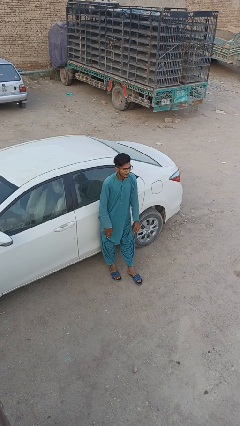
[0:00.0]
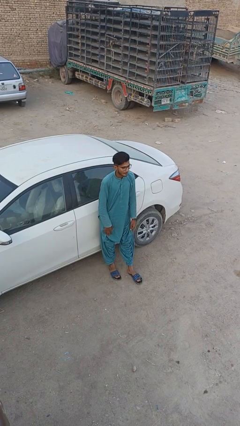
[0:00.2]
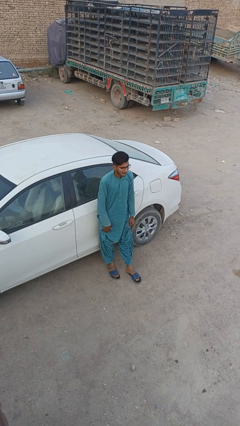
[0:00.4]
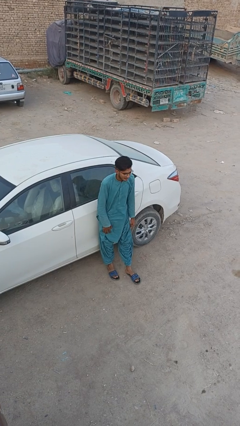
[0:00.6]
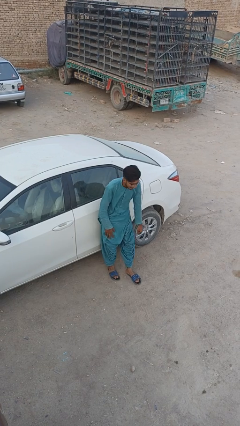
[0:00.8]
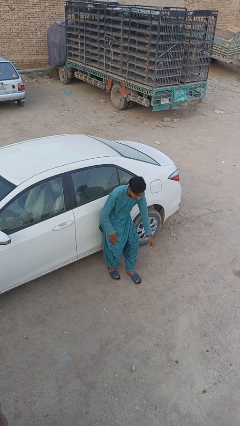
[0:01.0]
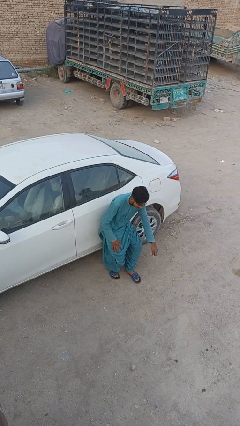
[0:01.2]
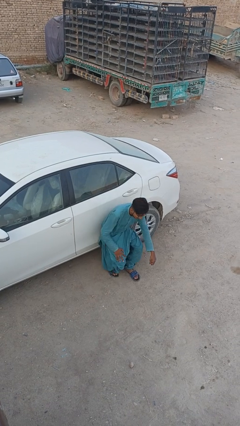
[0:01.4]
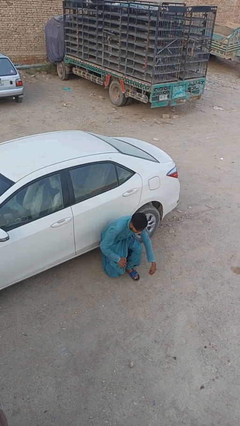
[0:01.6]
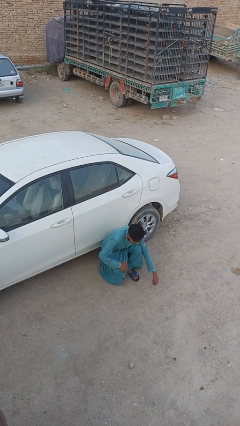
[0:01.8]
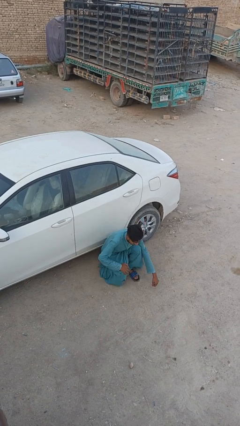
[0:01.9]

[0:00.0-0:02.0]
person leans against car

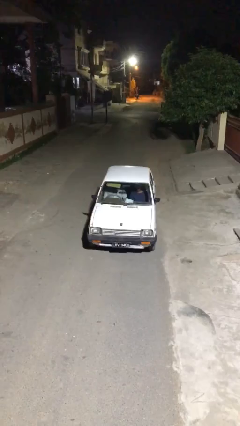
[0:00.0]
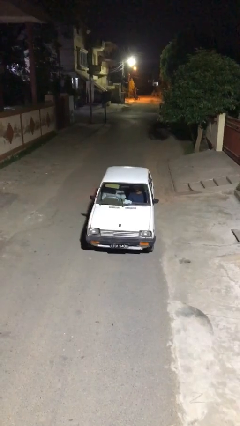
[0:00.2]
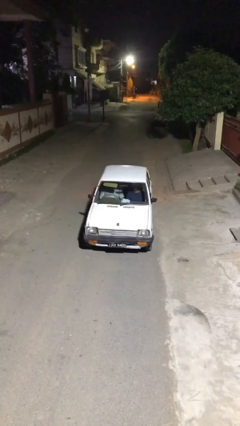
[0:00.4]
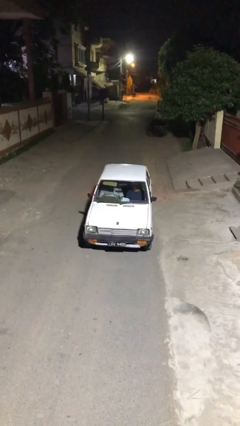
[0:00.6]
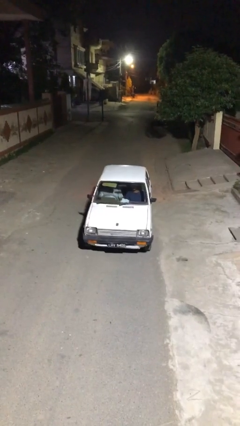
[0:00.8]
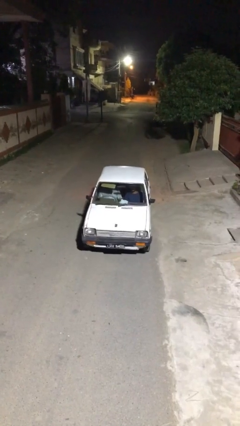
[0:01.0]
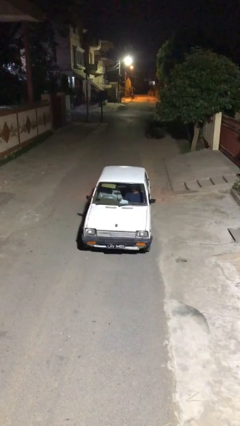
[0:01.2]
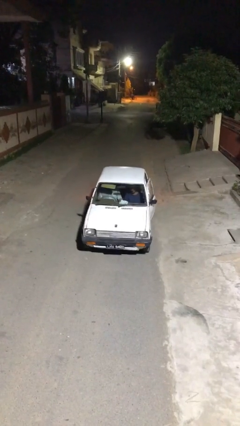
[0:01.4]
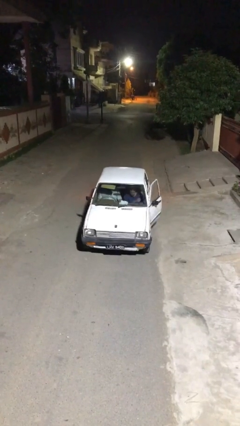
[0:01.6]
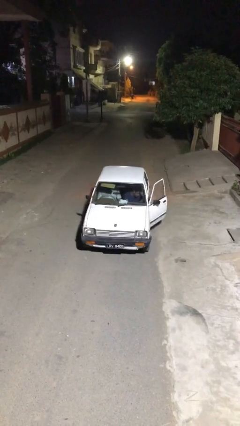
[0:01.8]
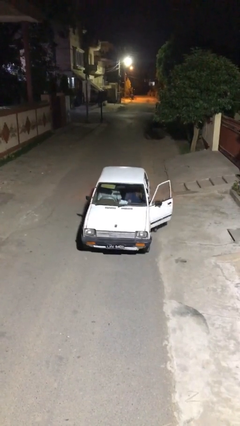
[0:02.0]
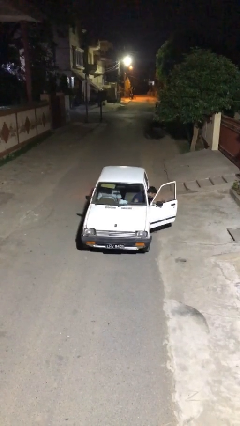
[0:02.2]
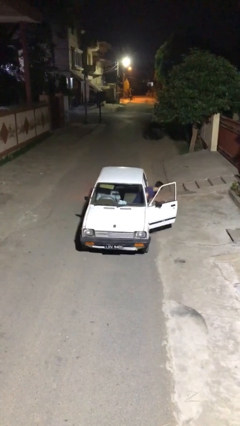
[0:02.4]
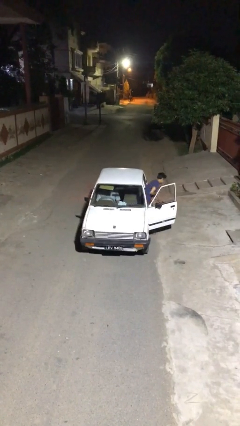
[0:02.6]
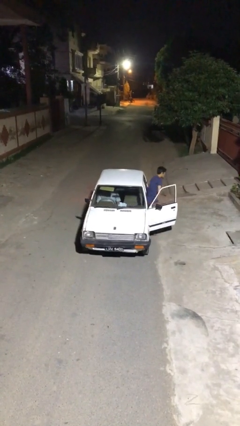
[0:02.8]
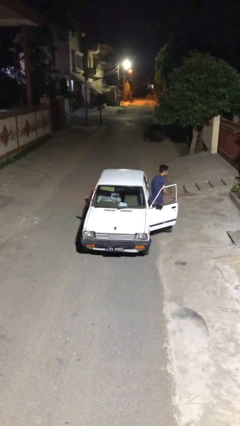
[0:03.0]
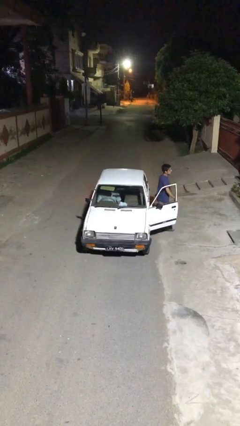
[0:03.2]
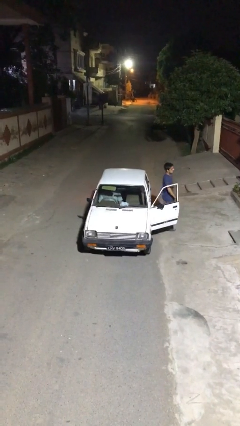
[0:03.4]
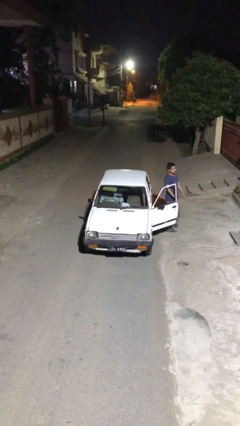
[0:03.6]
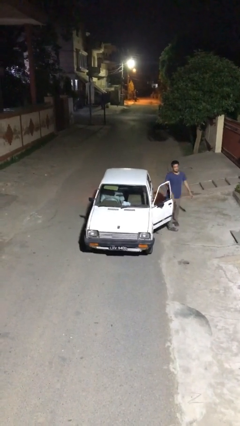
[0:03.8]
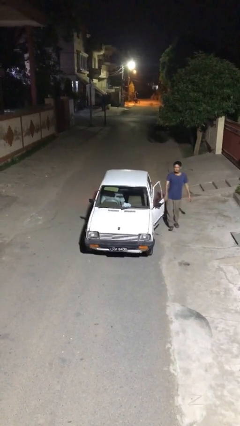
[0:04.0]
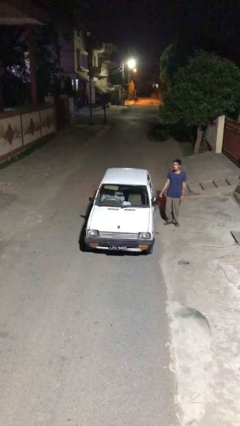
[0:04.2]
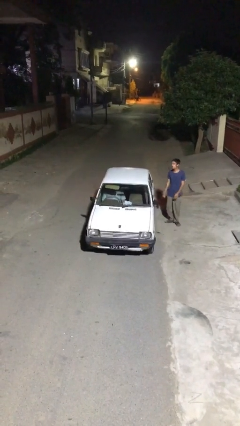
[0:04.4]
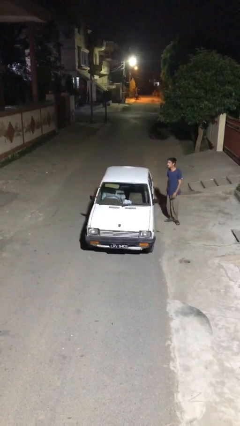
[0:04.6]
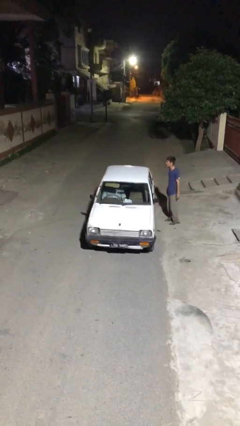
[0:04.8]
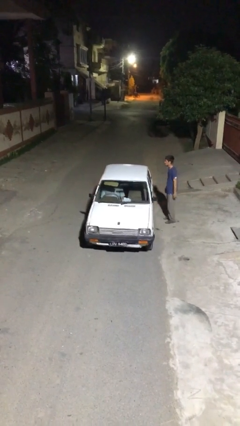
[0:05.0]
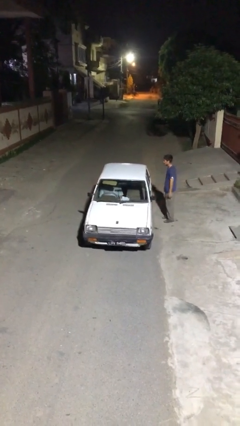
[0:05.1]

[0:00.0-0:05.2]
car drops off person

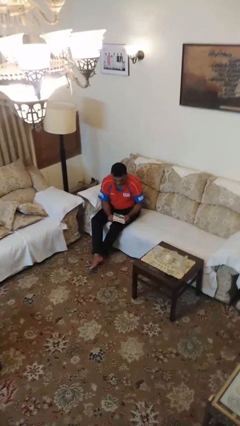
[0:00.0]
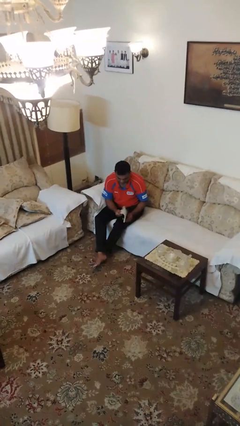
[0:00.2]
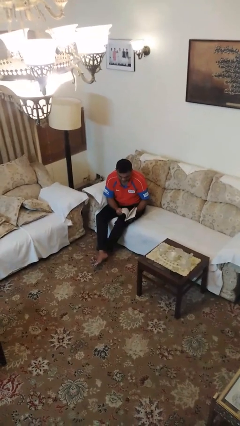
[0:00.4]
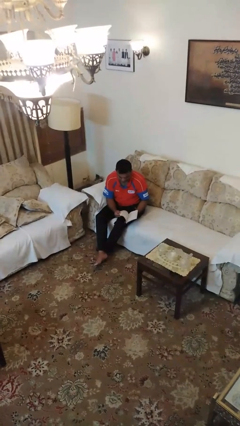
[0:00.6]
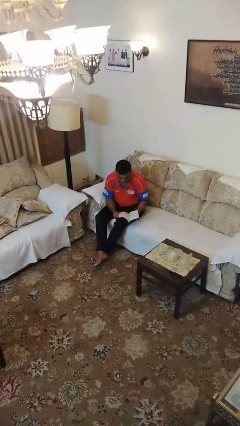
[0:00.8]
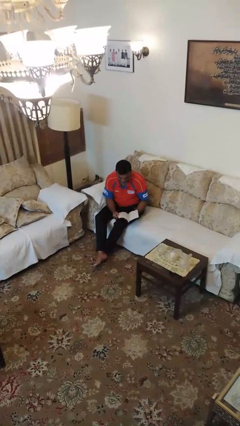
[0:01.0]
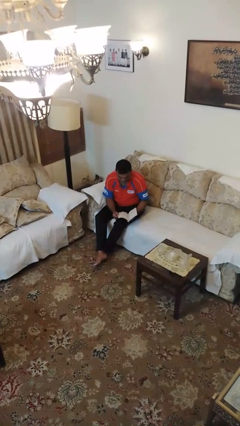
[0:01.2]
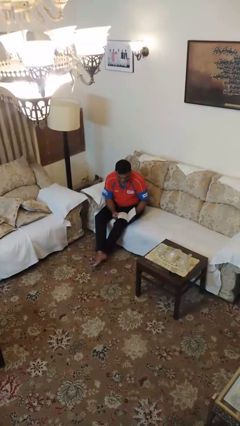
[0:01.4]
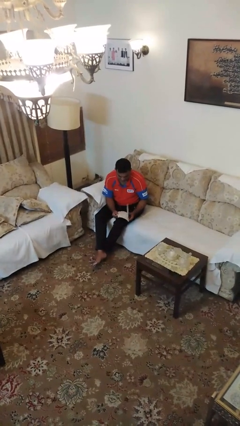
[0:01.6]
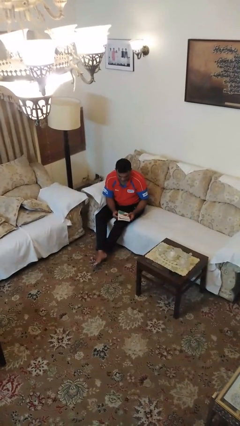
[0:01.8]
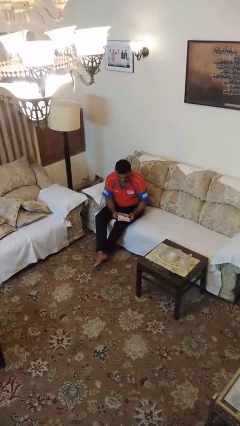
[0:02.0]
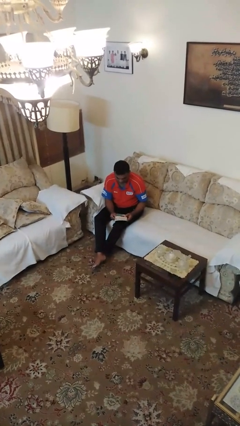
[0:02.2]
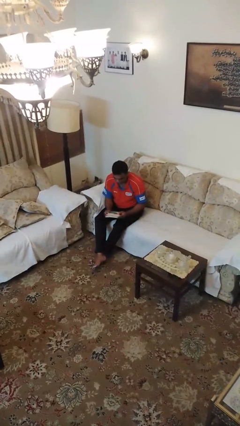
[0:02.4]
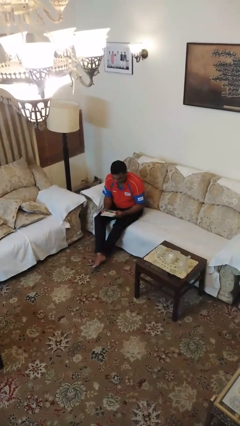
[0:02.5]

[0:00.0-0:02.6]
person reads magazine

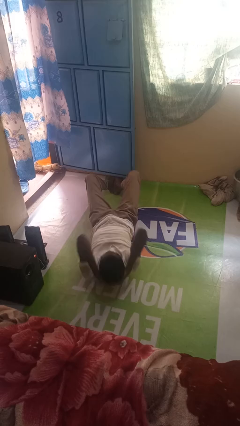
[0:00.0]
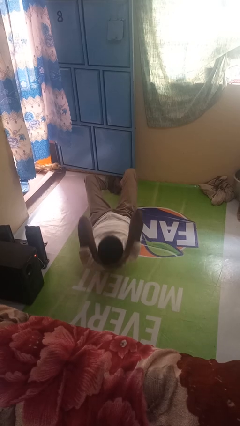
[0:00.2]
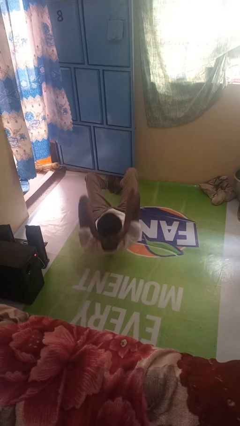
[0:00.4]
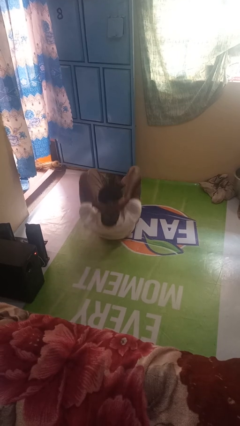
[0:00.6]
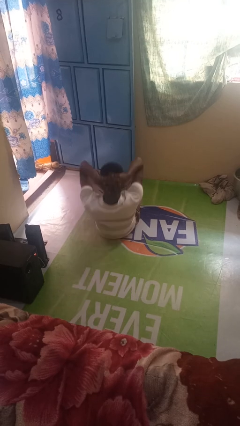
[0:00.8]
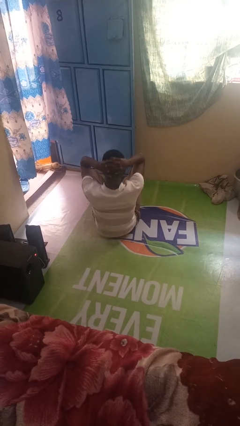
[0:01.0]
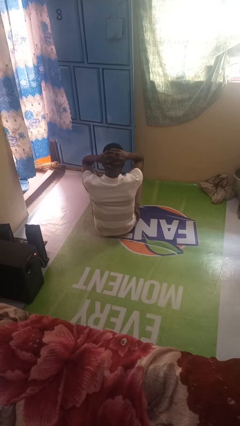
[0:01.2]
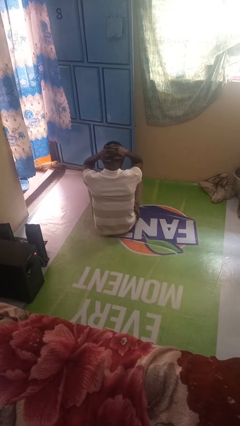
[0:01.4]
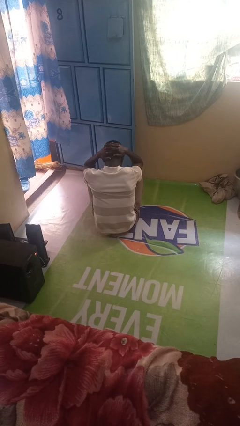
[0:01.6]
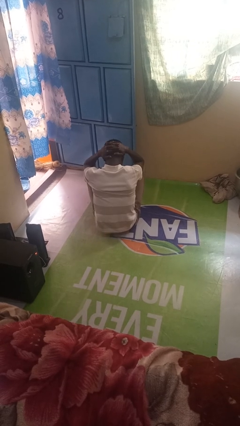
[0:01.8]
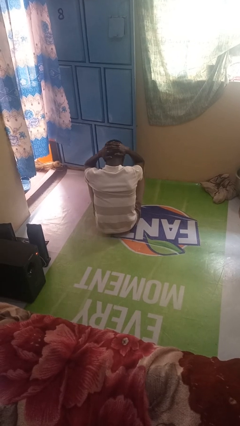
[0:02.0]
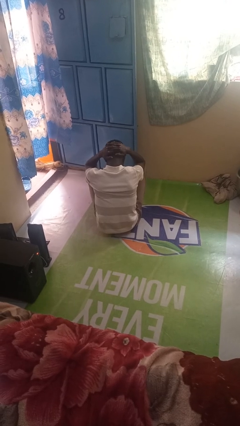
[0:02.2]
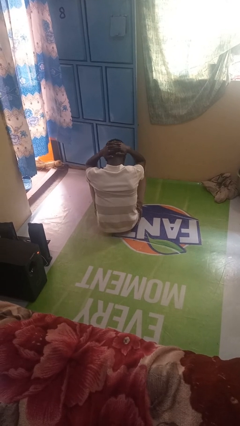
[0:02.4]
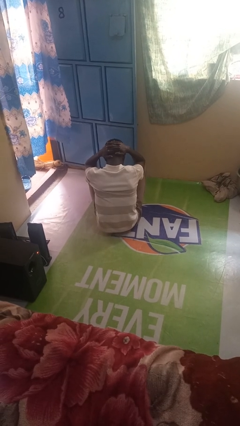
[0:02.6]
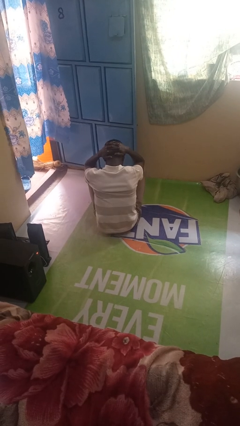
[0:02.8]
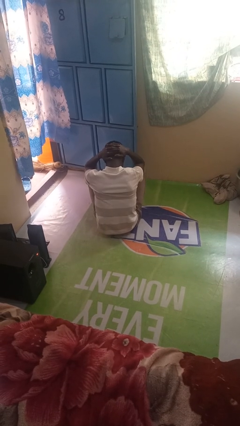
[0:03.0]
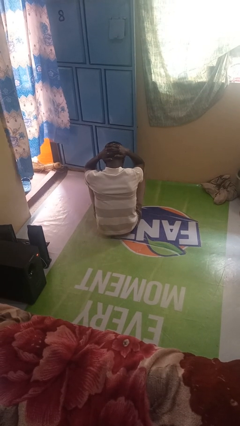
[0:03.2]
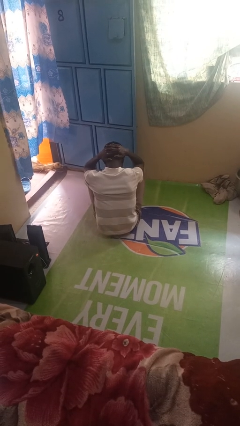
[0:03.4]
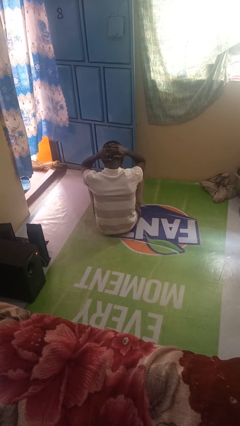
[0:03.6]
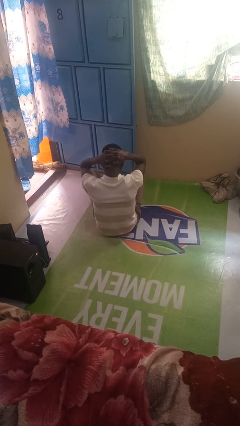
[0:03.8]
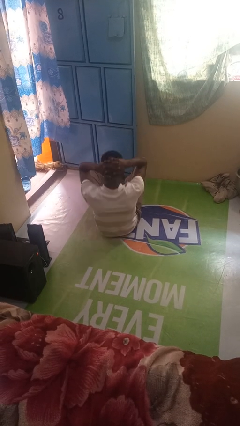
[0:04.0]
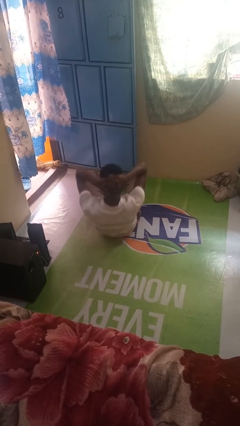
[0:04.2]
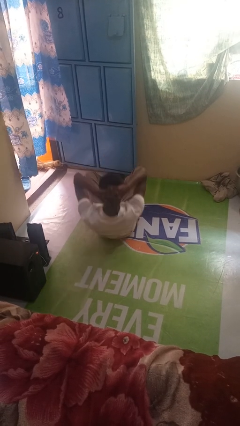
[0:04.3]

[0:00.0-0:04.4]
person exercises with situp

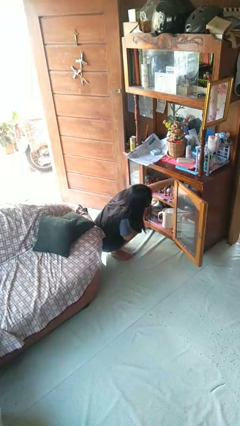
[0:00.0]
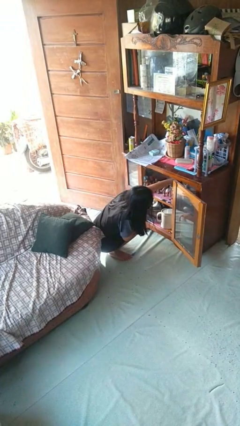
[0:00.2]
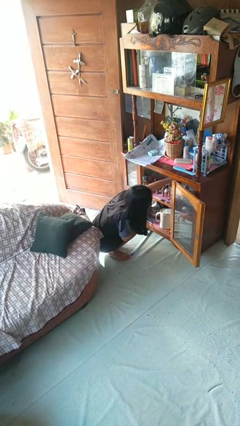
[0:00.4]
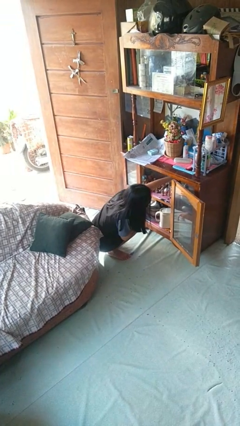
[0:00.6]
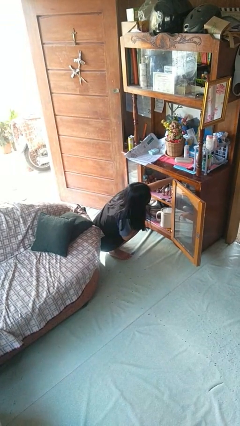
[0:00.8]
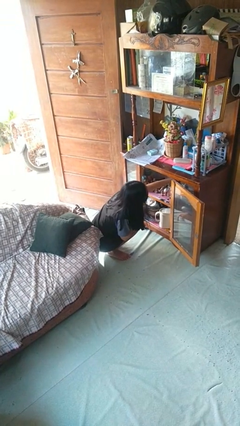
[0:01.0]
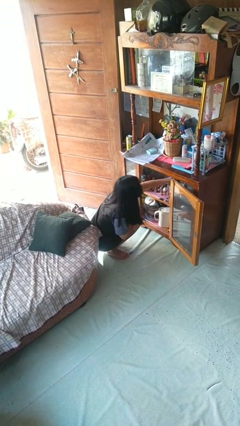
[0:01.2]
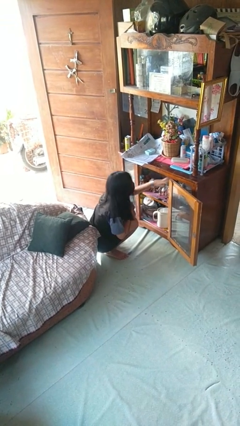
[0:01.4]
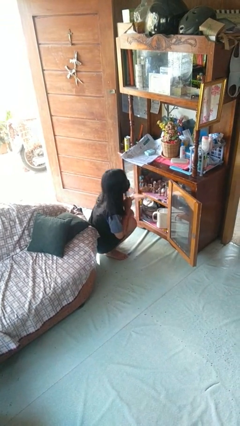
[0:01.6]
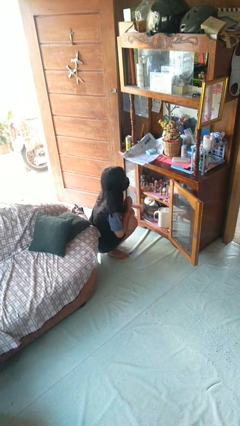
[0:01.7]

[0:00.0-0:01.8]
person searches in cabinet

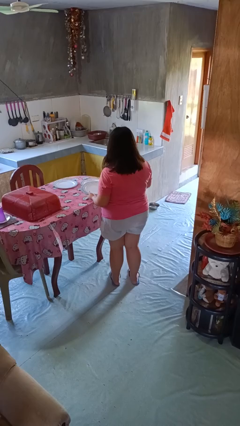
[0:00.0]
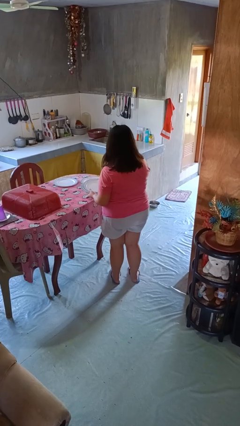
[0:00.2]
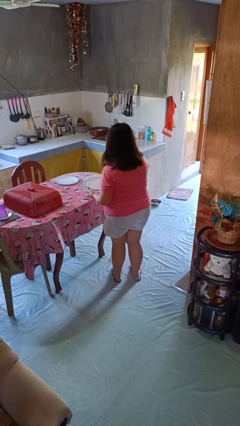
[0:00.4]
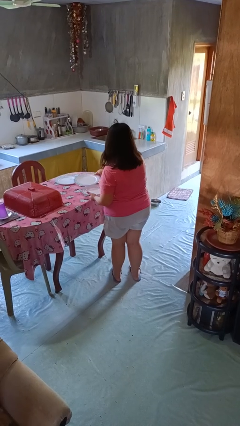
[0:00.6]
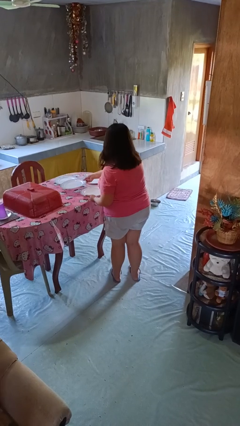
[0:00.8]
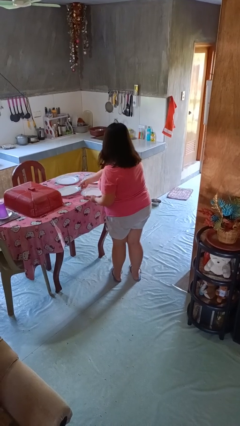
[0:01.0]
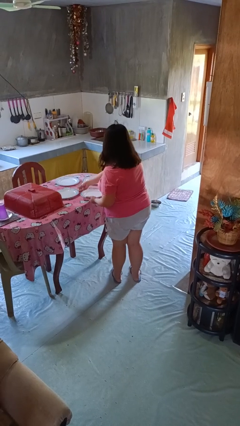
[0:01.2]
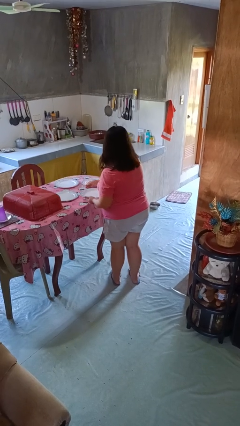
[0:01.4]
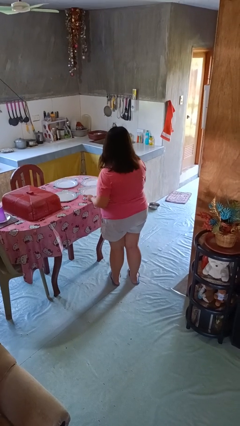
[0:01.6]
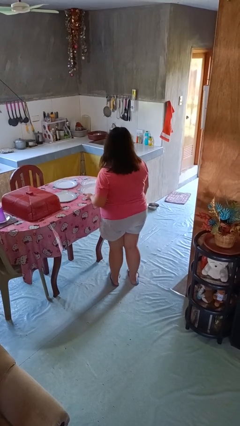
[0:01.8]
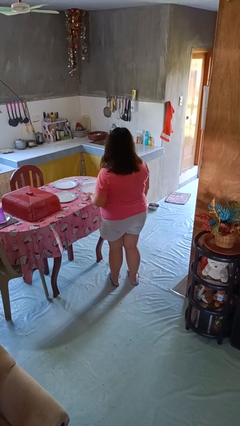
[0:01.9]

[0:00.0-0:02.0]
person sets table
